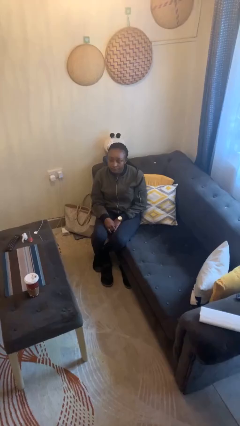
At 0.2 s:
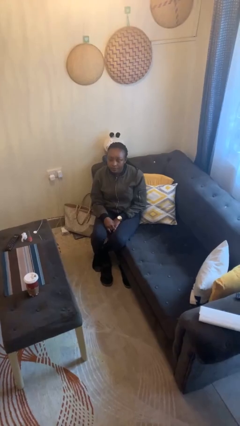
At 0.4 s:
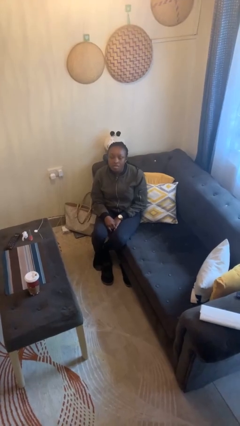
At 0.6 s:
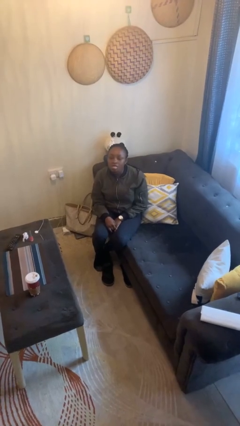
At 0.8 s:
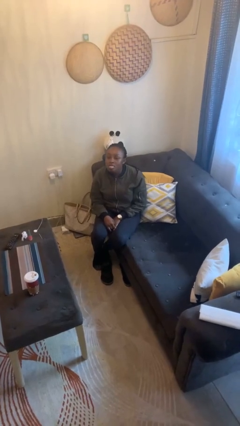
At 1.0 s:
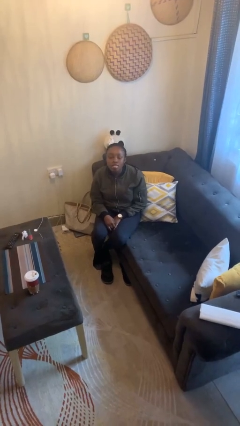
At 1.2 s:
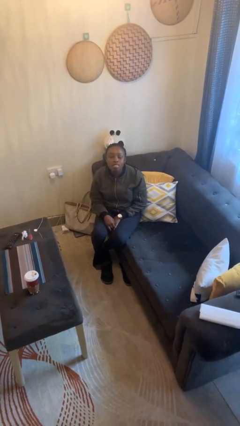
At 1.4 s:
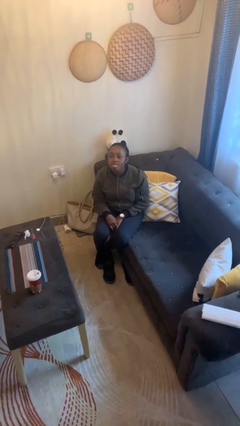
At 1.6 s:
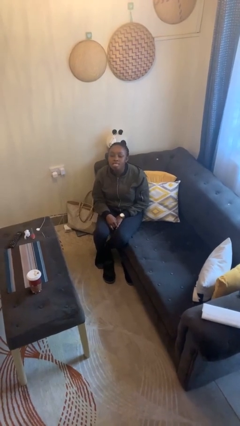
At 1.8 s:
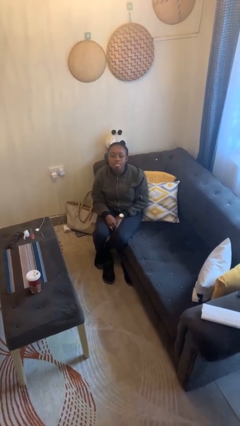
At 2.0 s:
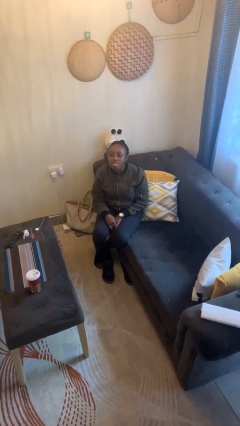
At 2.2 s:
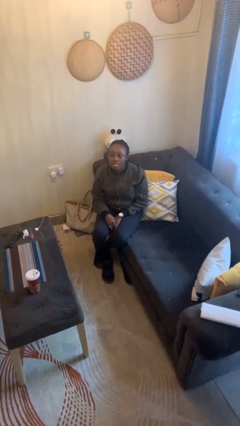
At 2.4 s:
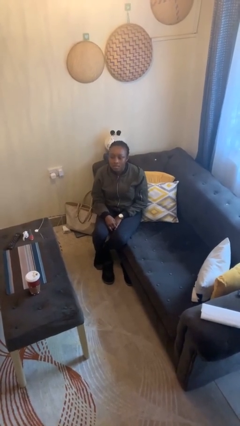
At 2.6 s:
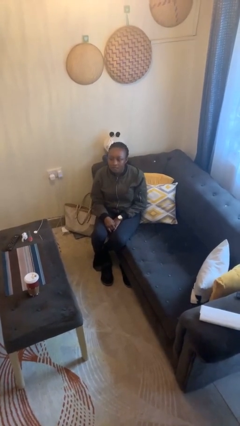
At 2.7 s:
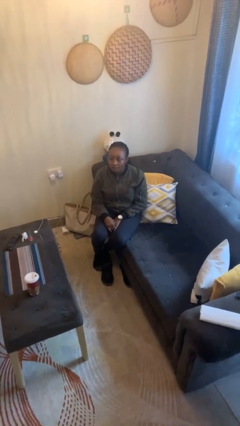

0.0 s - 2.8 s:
person sticks out tongue

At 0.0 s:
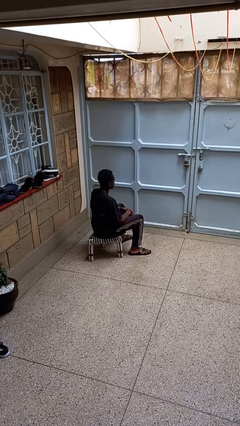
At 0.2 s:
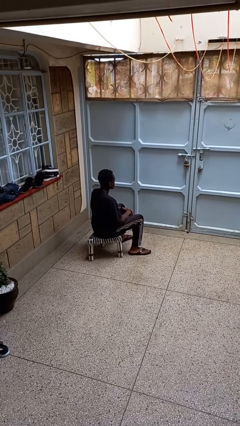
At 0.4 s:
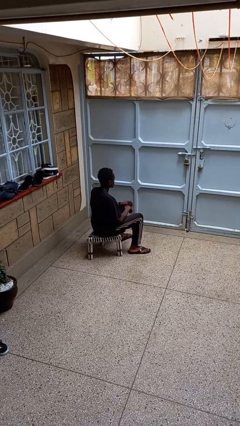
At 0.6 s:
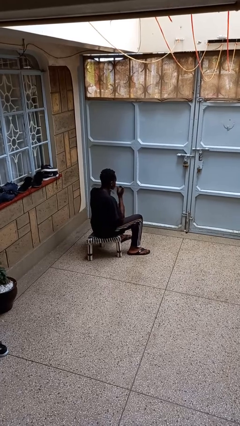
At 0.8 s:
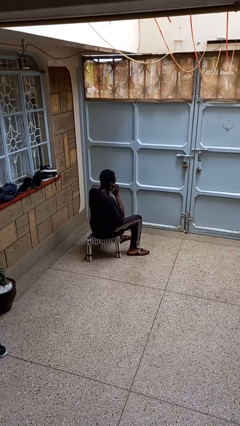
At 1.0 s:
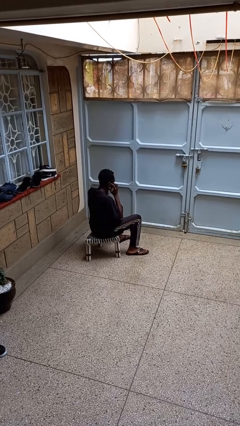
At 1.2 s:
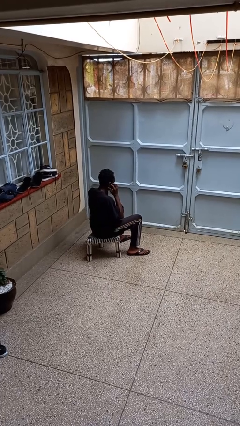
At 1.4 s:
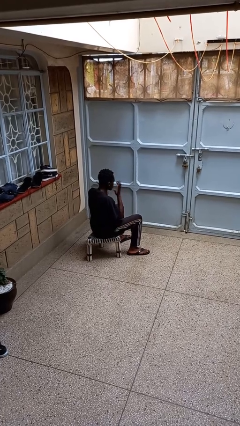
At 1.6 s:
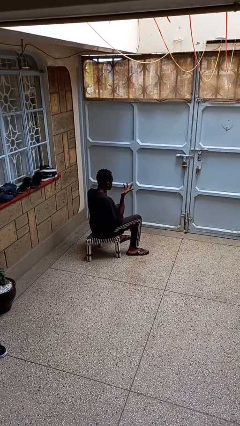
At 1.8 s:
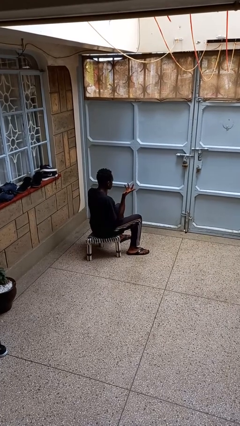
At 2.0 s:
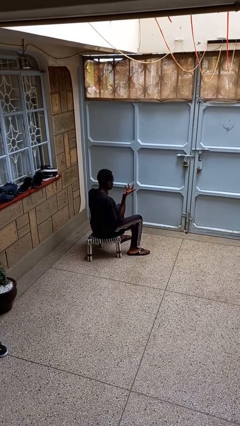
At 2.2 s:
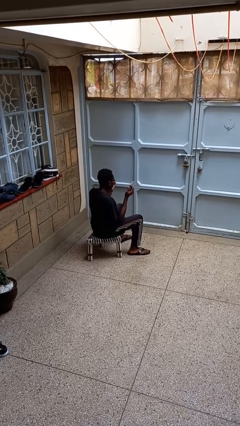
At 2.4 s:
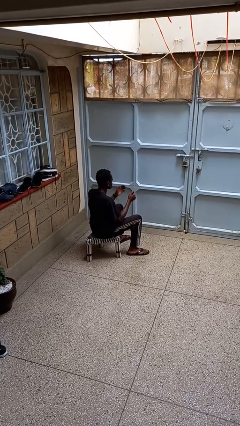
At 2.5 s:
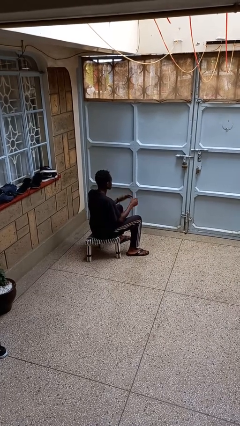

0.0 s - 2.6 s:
person puts fingers in ear

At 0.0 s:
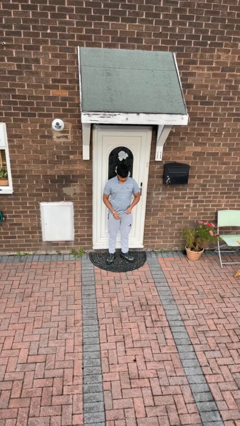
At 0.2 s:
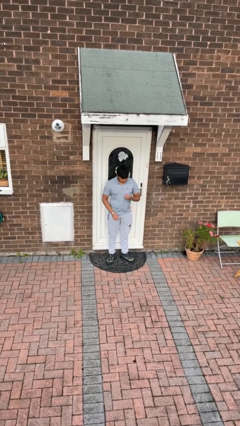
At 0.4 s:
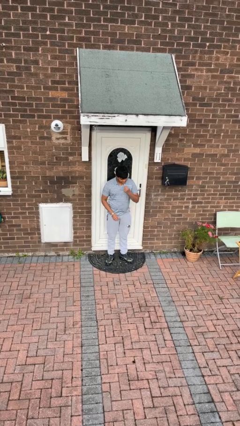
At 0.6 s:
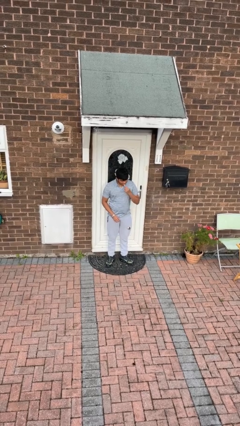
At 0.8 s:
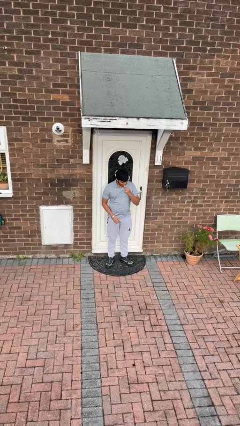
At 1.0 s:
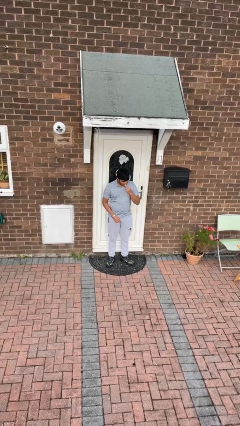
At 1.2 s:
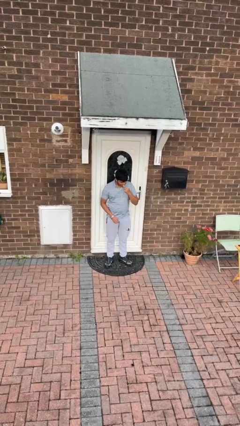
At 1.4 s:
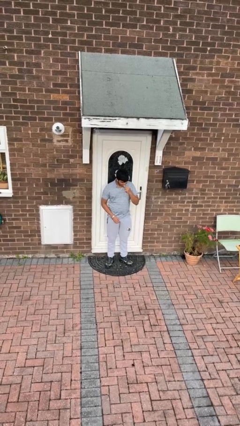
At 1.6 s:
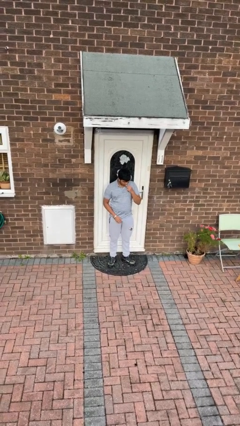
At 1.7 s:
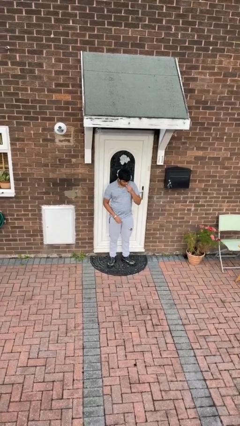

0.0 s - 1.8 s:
person flosses

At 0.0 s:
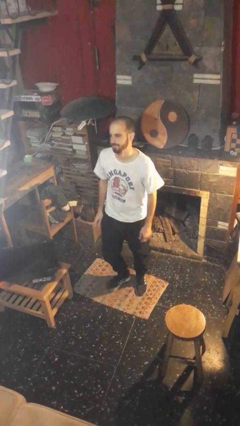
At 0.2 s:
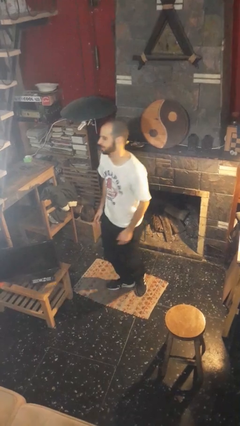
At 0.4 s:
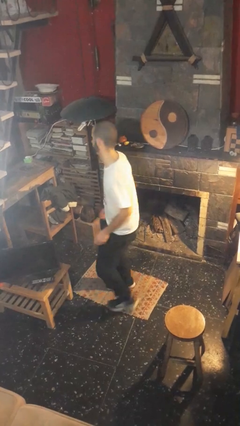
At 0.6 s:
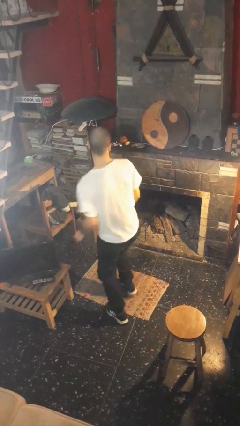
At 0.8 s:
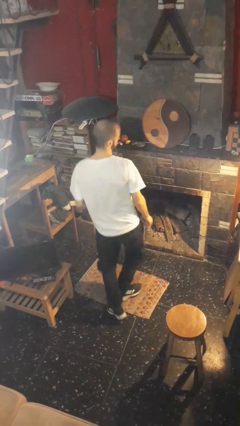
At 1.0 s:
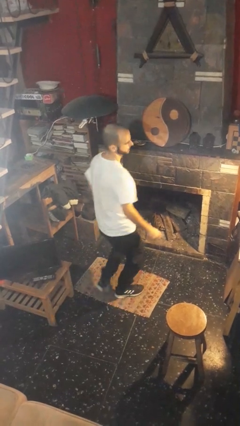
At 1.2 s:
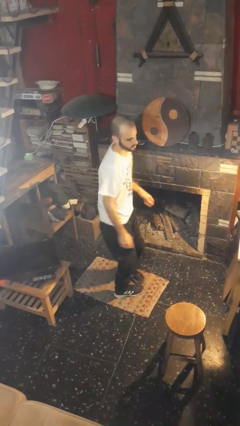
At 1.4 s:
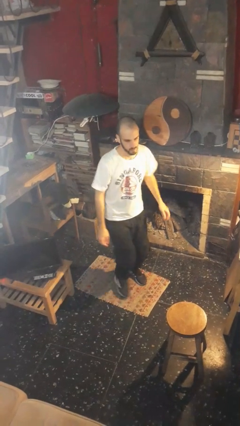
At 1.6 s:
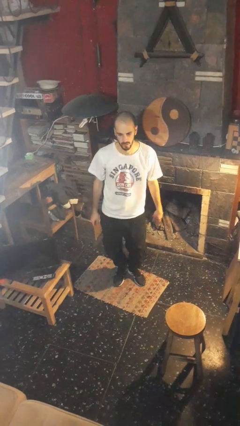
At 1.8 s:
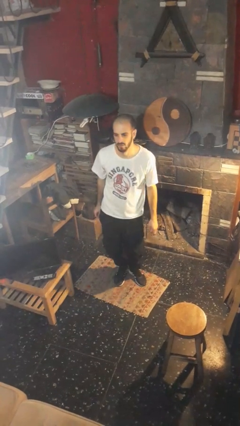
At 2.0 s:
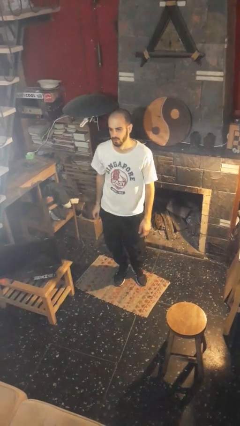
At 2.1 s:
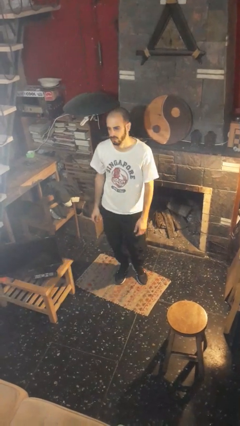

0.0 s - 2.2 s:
person twirls

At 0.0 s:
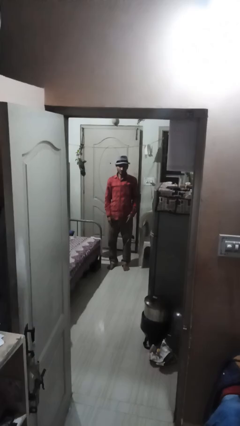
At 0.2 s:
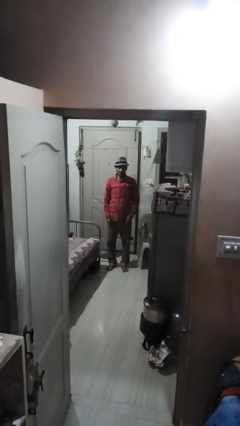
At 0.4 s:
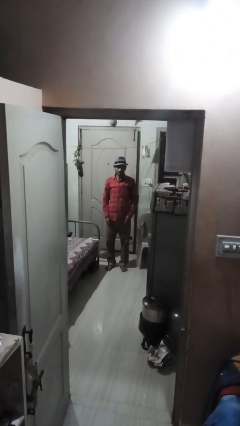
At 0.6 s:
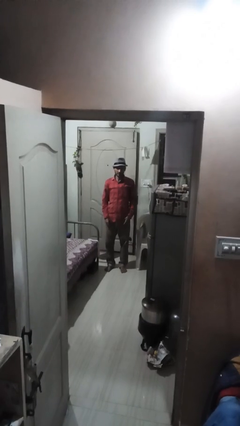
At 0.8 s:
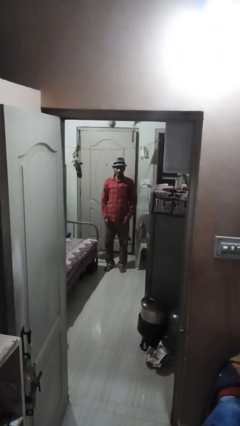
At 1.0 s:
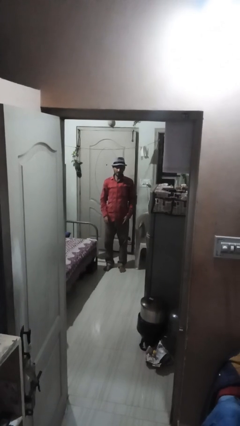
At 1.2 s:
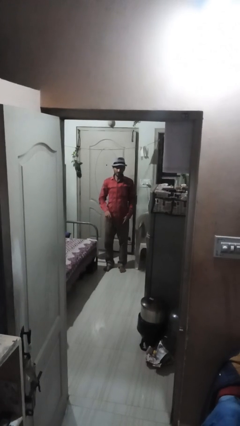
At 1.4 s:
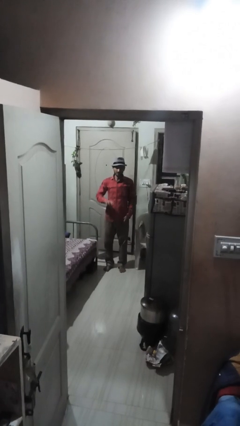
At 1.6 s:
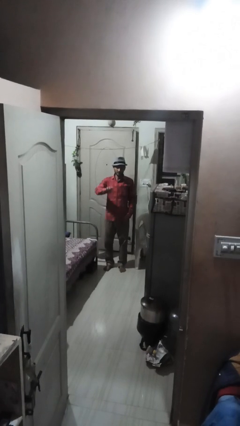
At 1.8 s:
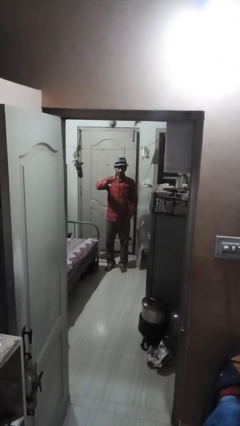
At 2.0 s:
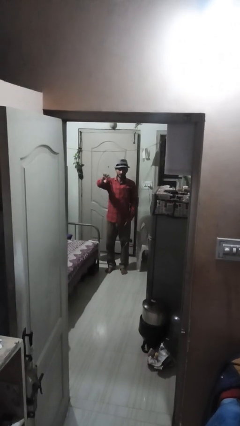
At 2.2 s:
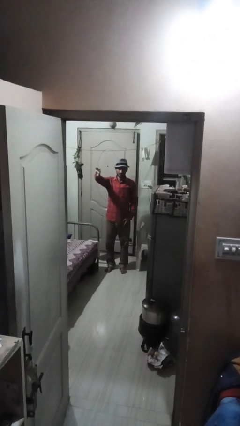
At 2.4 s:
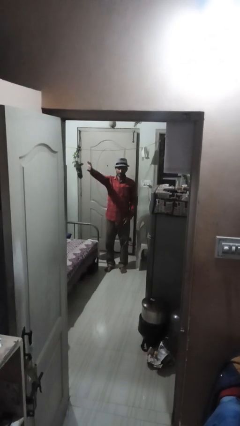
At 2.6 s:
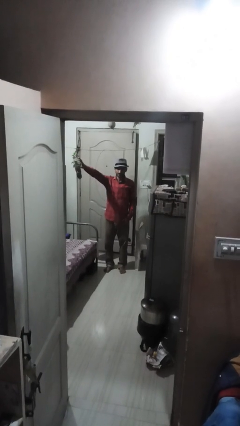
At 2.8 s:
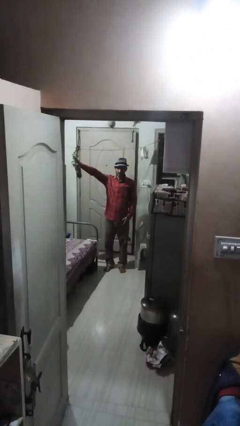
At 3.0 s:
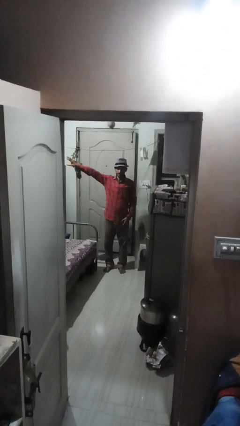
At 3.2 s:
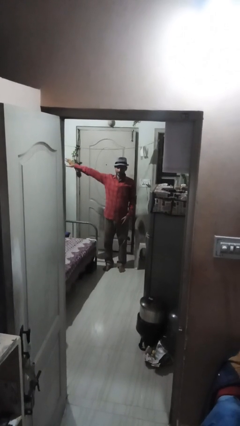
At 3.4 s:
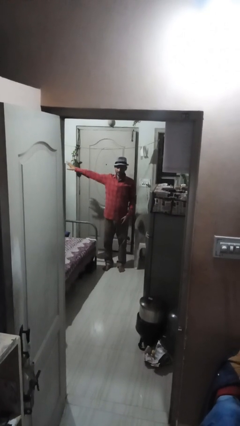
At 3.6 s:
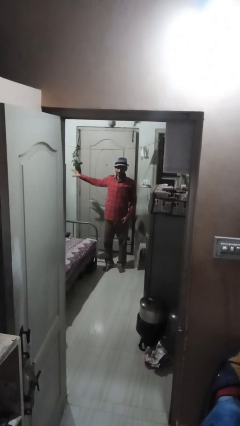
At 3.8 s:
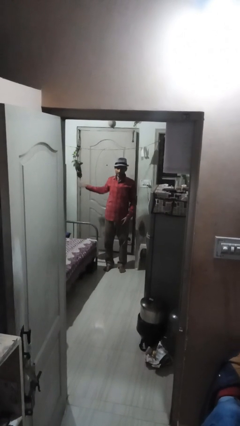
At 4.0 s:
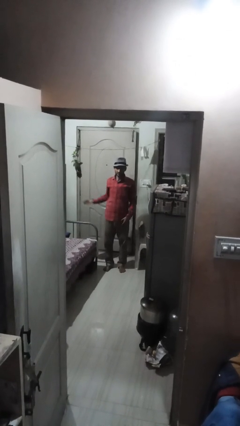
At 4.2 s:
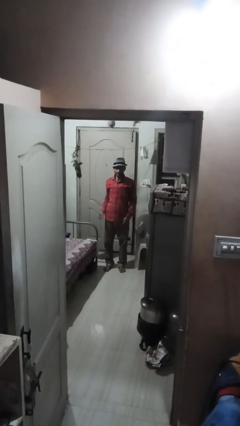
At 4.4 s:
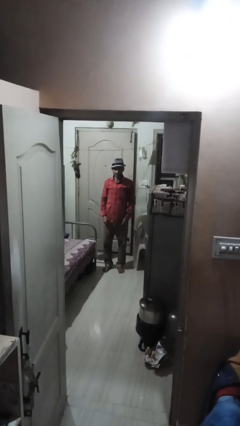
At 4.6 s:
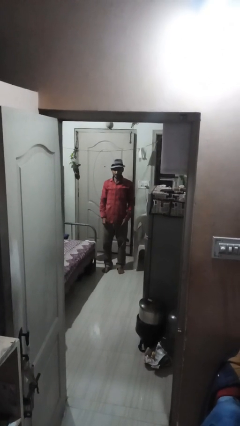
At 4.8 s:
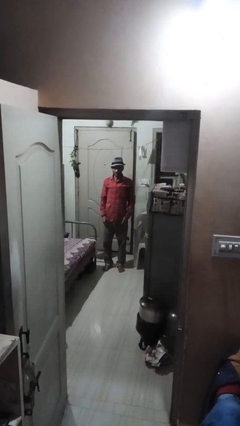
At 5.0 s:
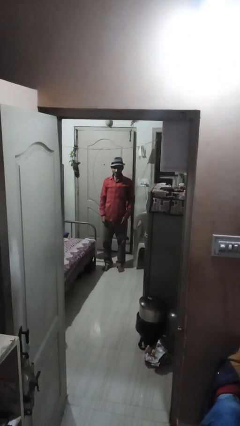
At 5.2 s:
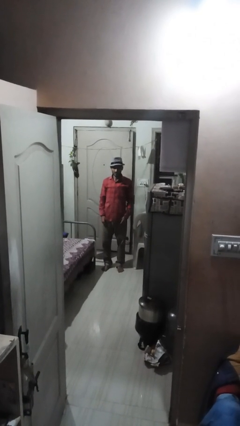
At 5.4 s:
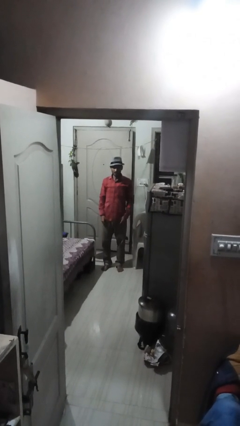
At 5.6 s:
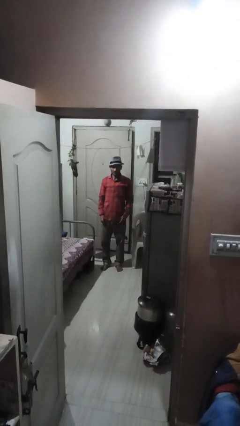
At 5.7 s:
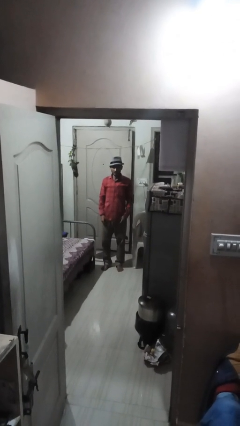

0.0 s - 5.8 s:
person gestures swipe right

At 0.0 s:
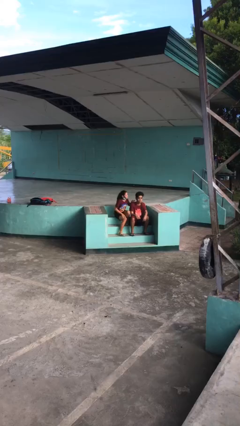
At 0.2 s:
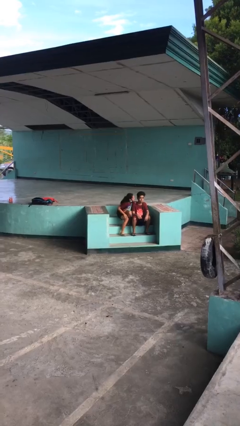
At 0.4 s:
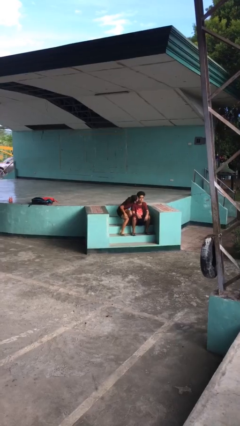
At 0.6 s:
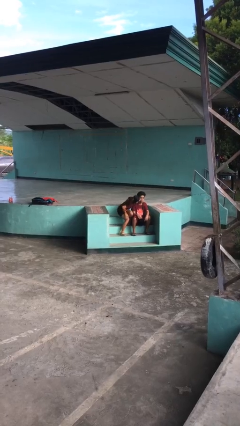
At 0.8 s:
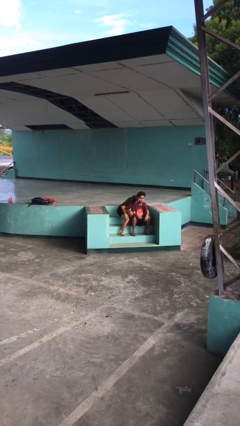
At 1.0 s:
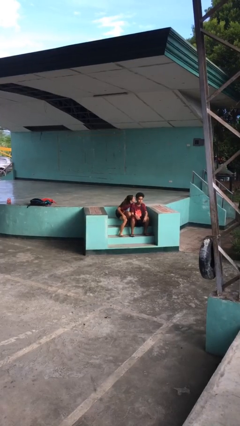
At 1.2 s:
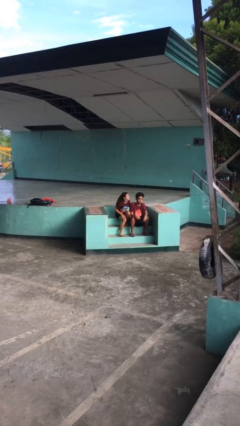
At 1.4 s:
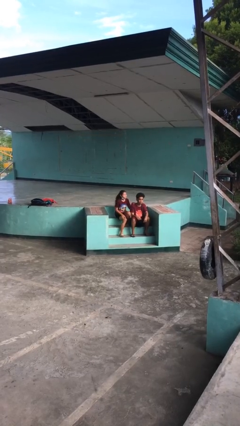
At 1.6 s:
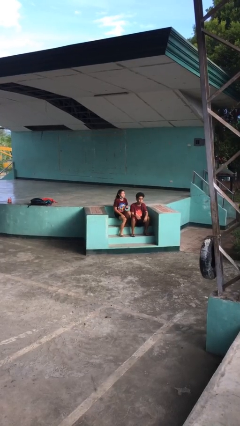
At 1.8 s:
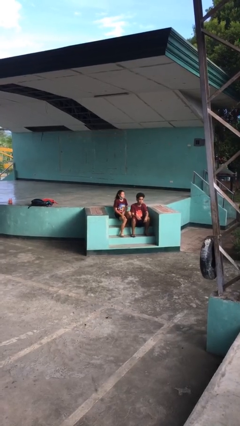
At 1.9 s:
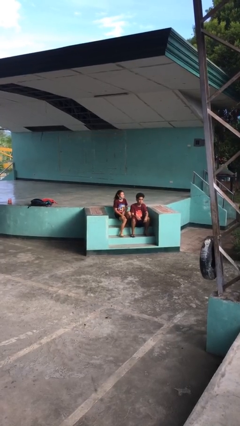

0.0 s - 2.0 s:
person kisses cheek of person

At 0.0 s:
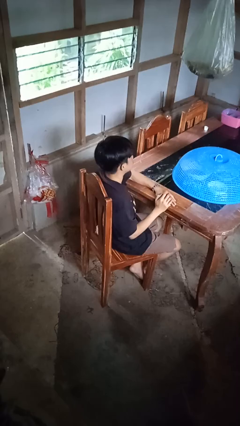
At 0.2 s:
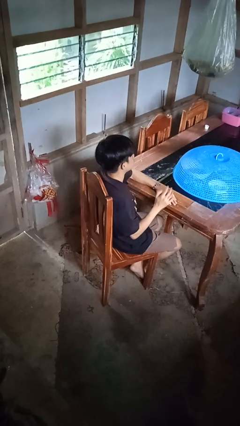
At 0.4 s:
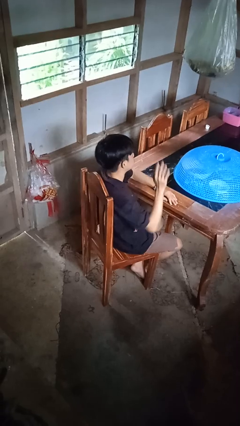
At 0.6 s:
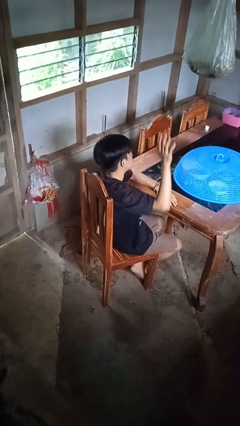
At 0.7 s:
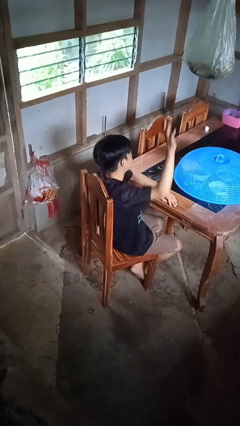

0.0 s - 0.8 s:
person gestures raise hand
